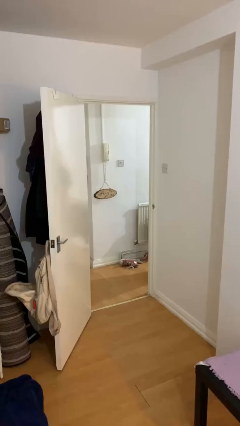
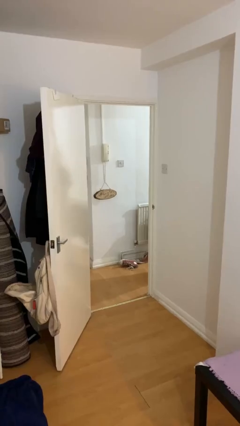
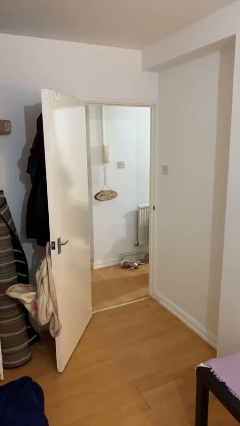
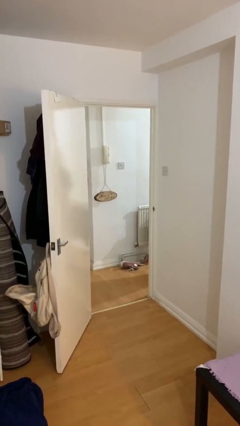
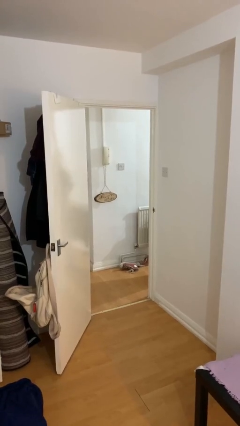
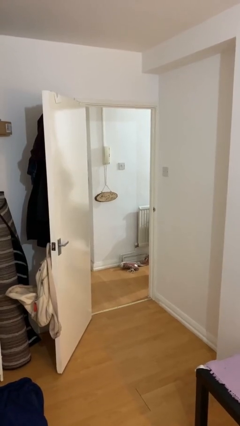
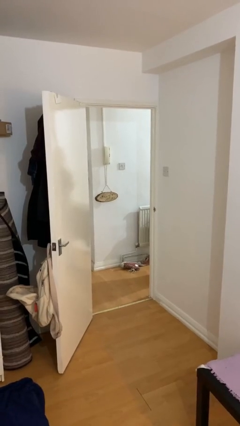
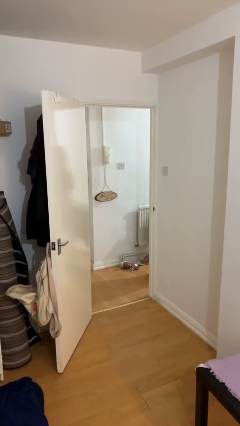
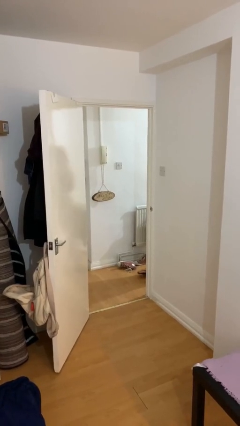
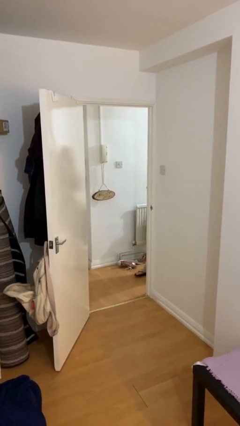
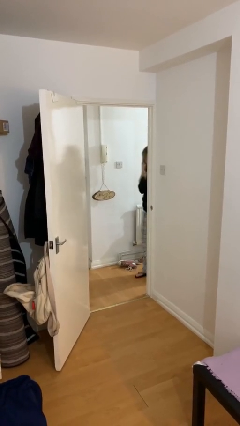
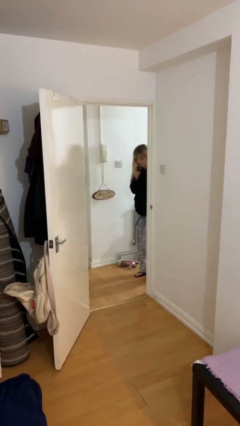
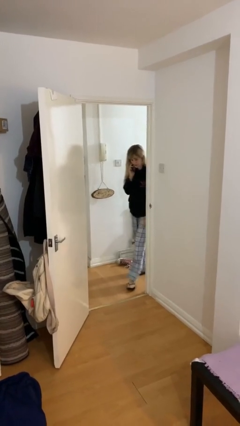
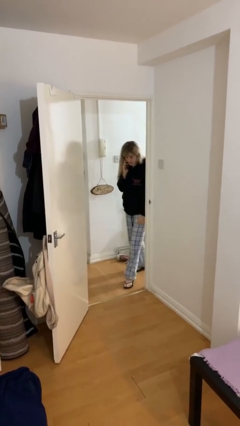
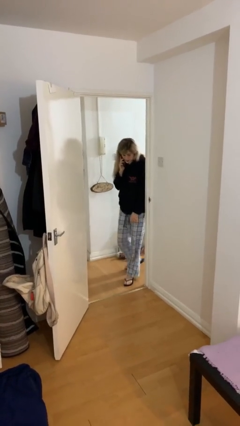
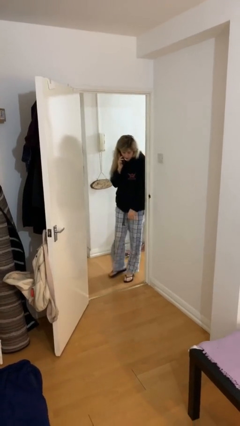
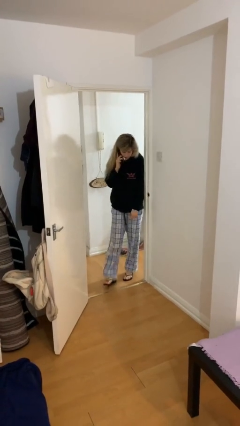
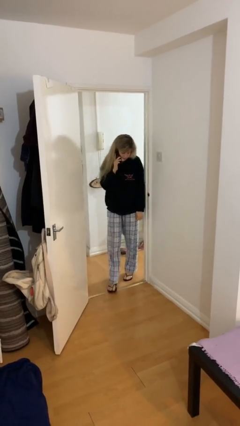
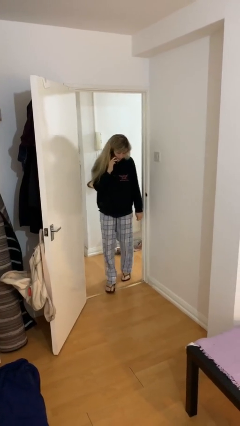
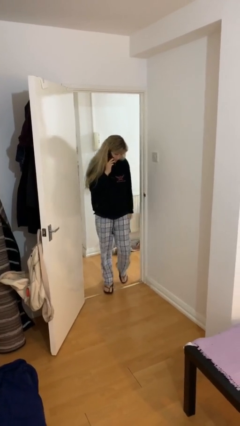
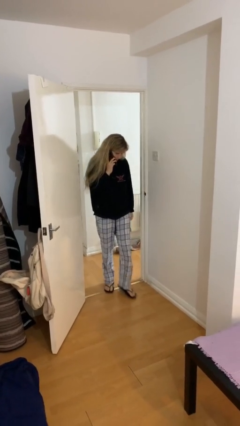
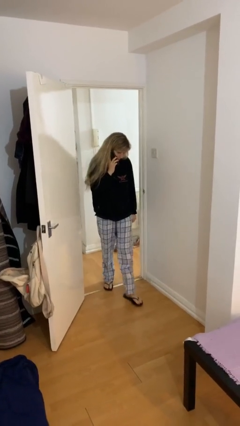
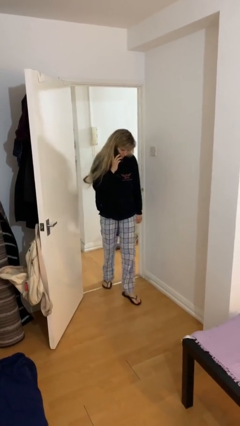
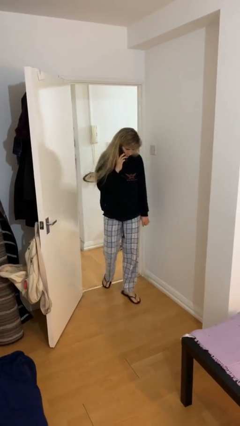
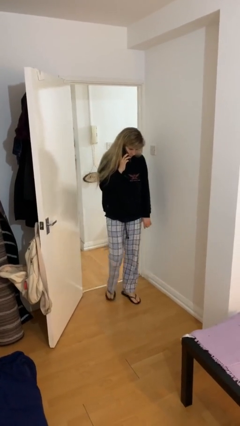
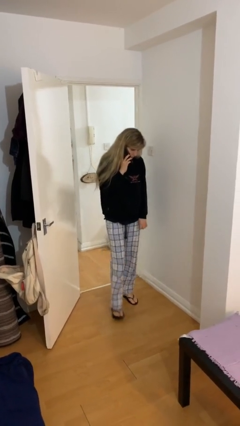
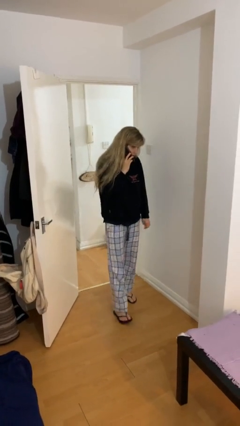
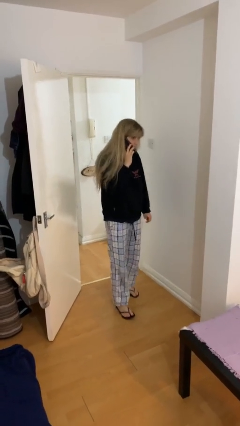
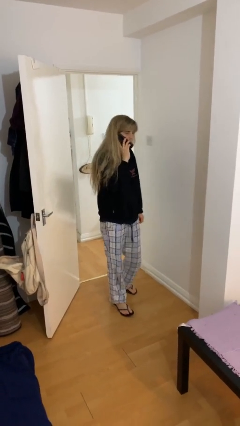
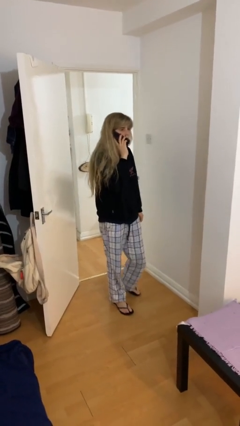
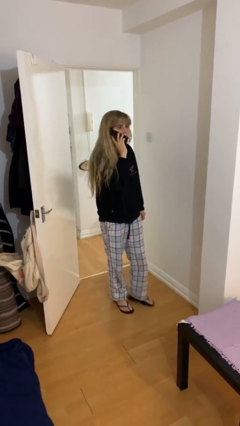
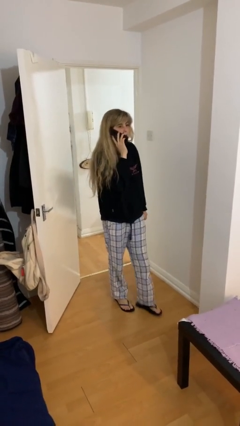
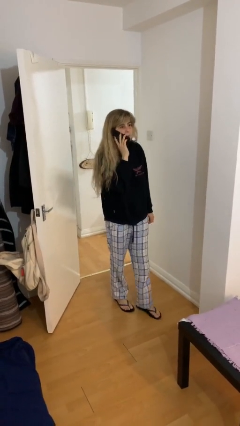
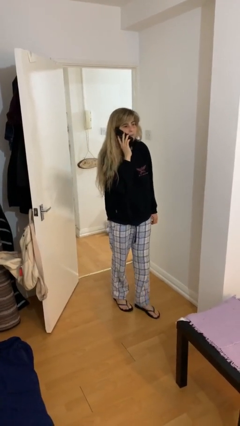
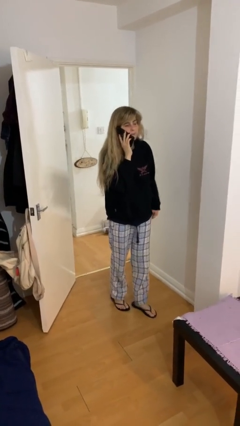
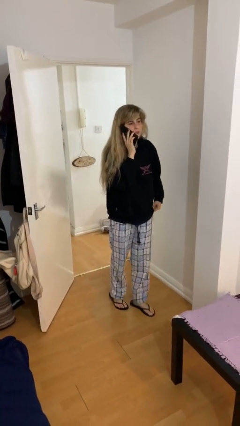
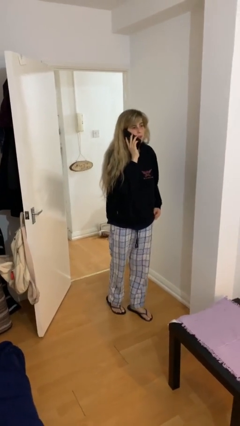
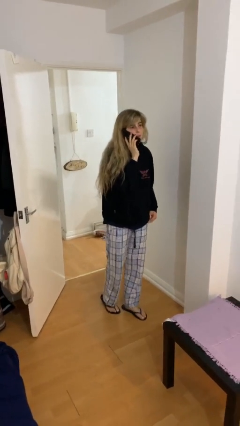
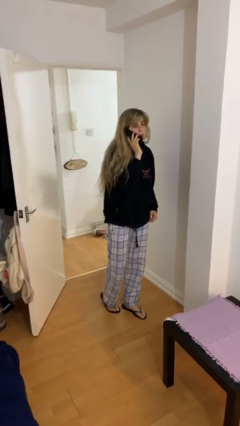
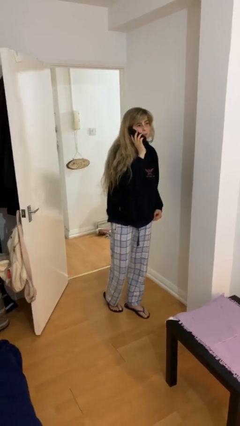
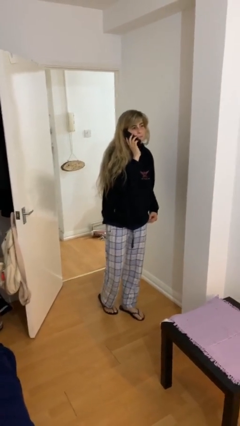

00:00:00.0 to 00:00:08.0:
person enters scene through structure

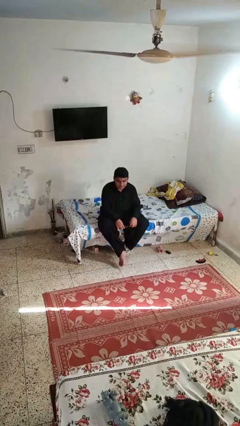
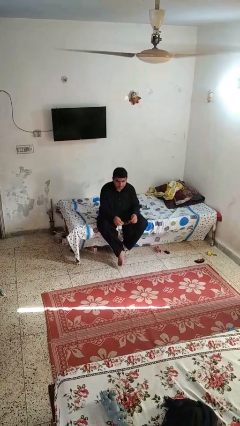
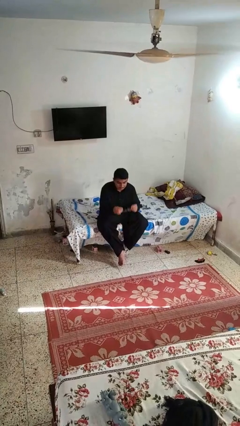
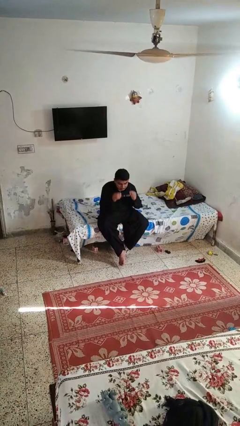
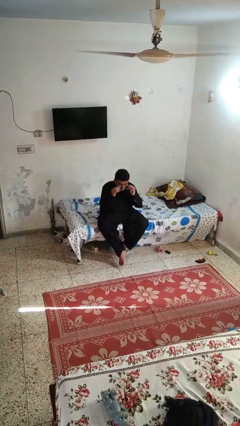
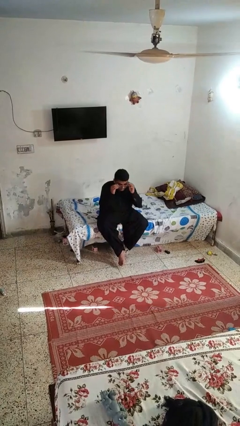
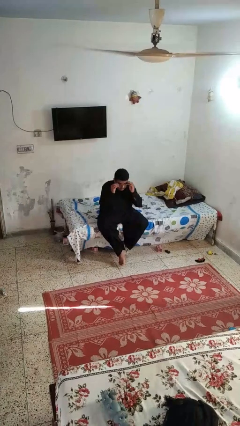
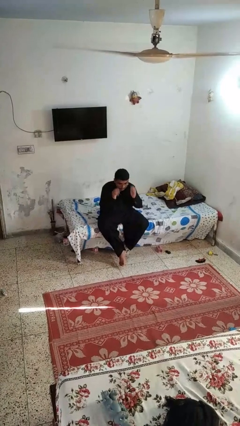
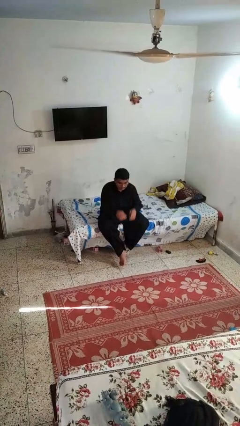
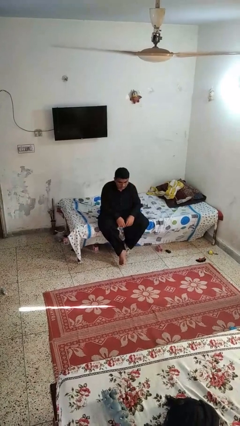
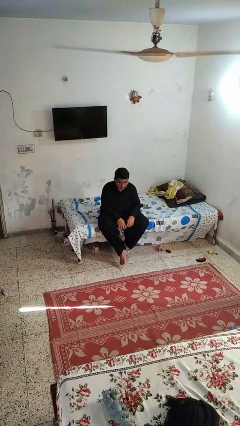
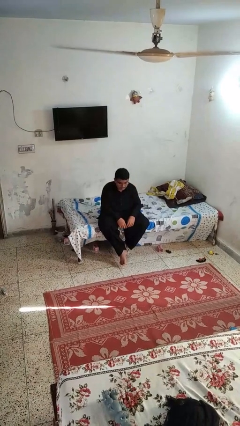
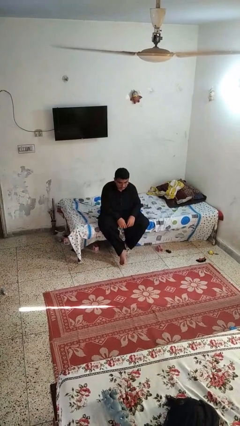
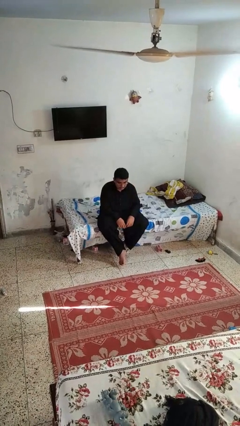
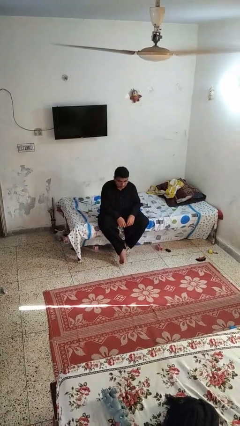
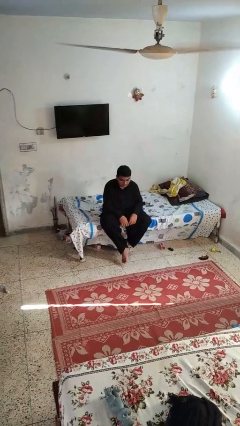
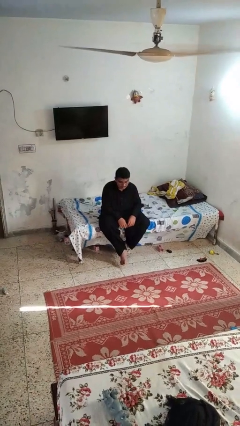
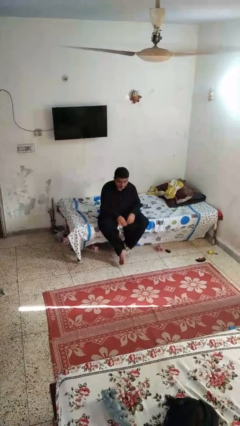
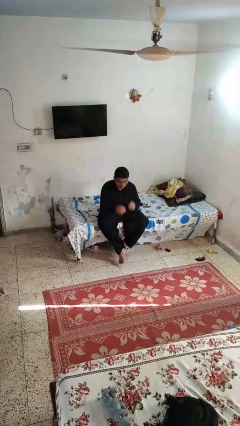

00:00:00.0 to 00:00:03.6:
person puts on glasses

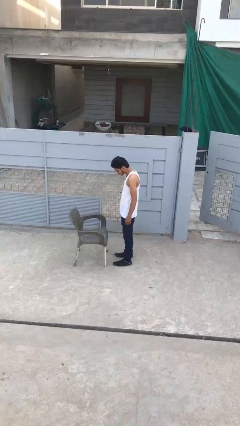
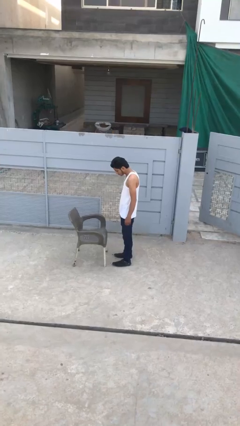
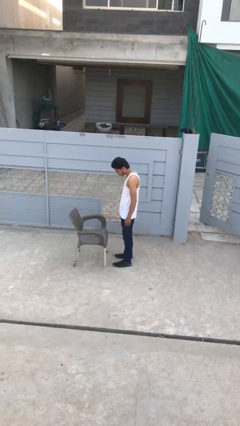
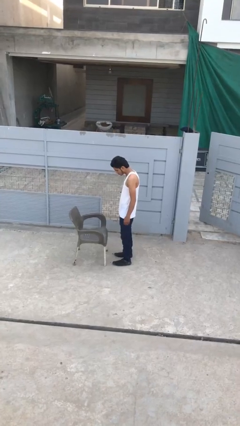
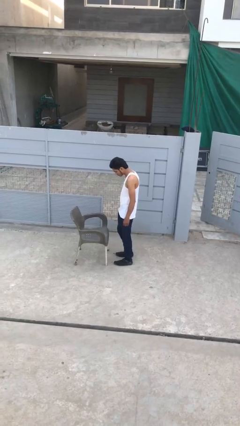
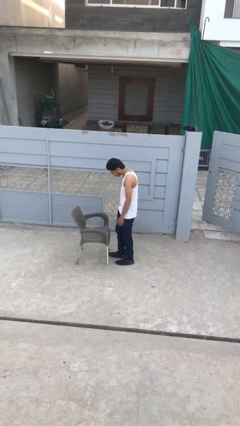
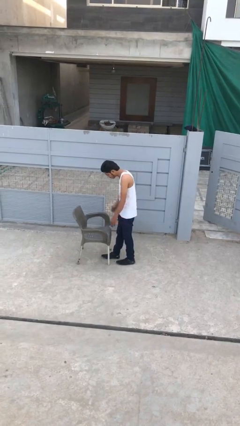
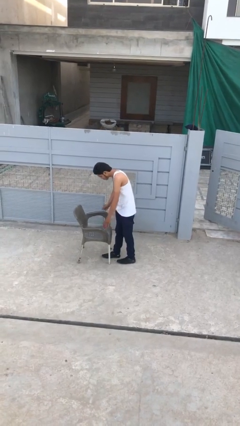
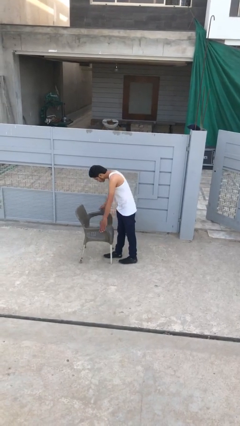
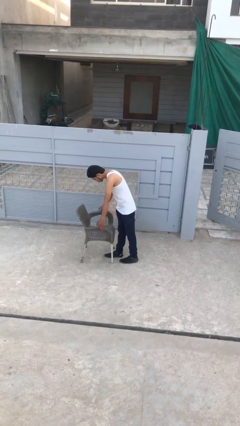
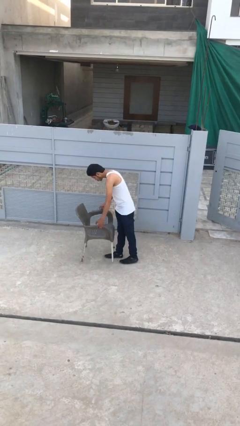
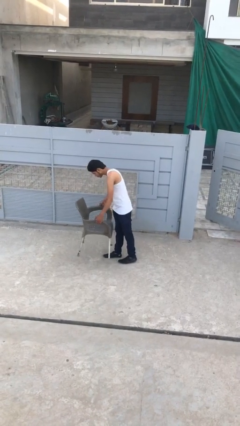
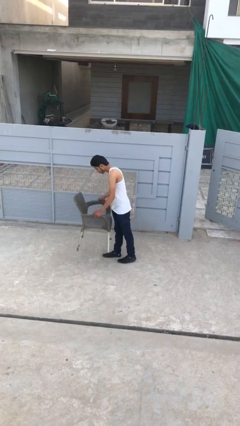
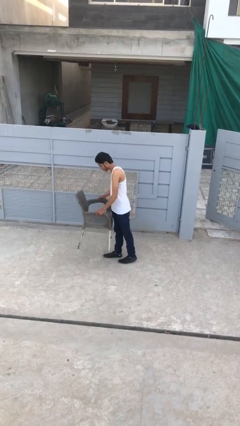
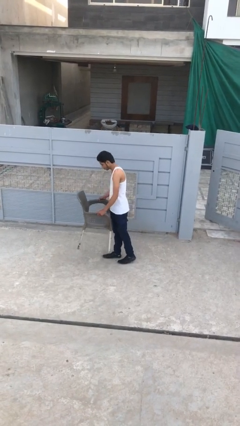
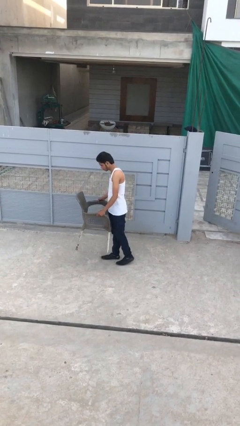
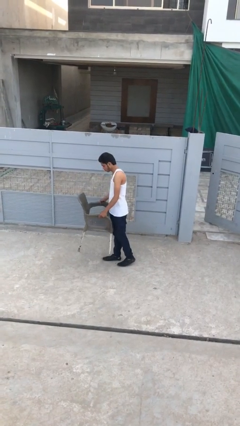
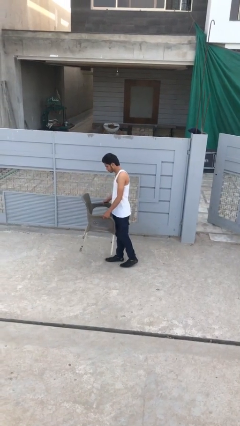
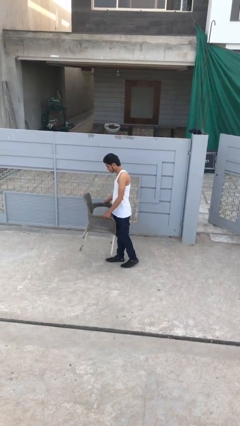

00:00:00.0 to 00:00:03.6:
person picks up object from floor

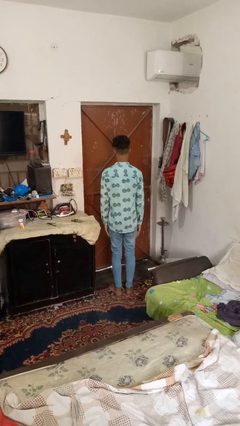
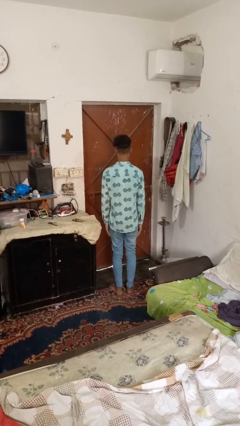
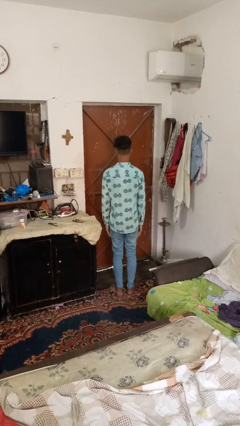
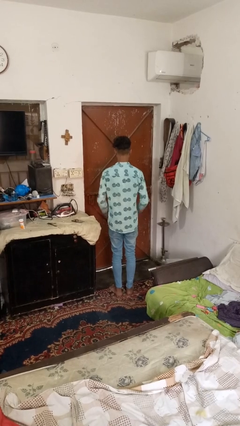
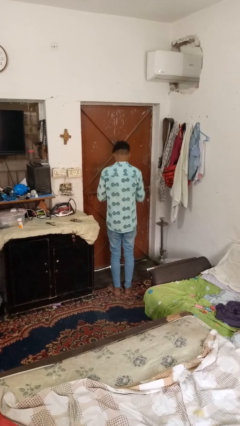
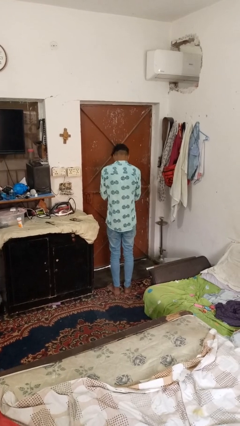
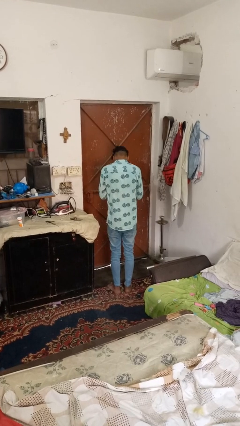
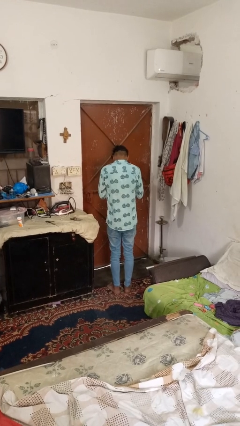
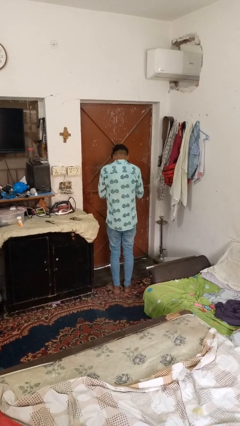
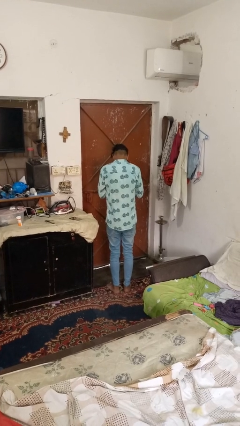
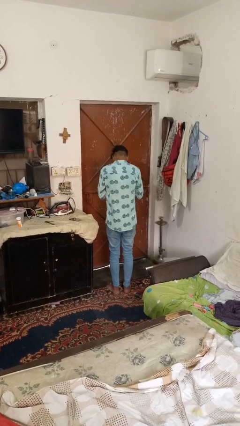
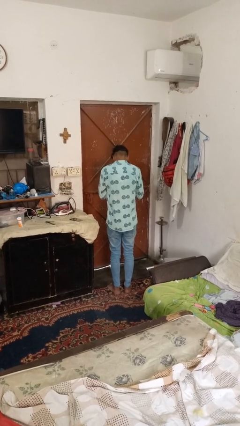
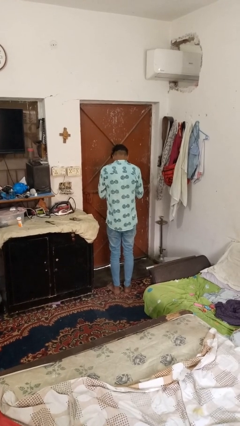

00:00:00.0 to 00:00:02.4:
person sneezes into hand

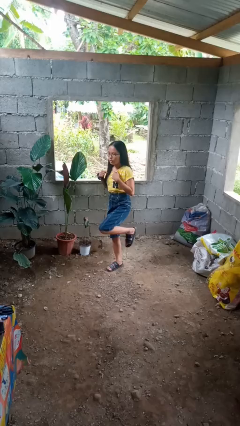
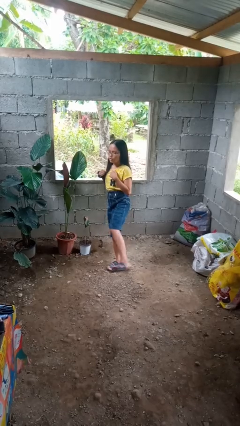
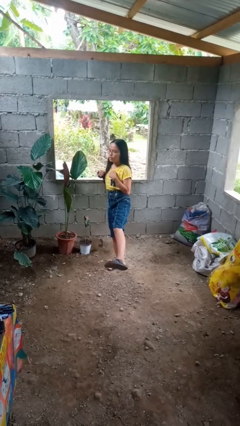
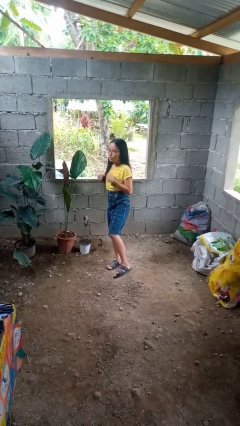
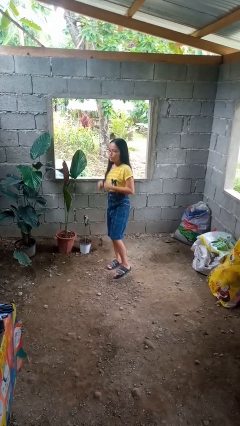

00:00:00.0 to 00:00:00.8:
person karate kicks
